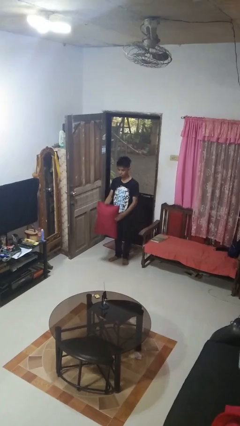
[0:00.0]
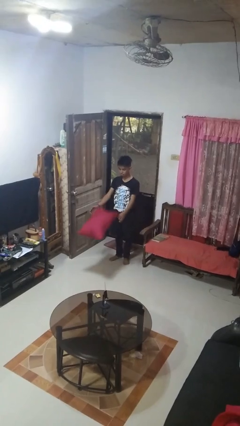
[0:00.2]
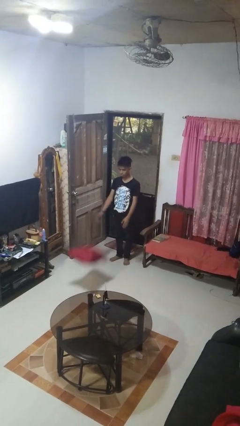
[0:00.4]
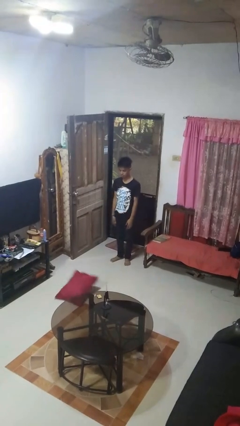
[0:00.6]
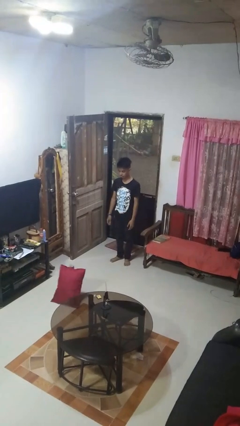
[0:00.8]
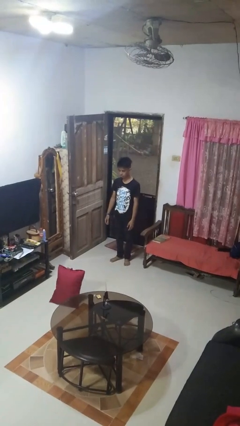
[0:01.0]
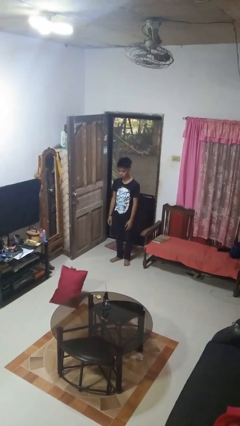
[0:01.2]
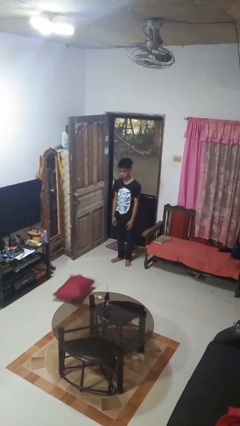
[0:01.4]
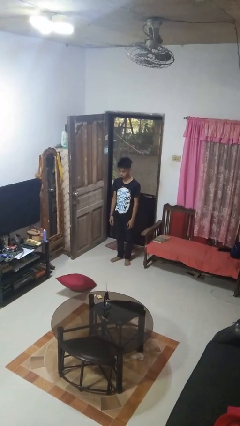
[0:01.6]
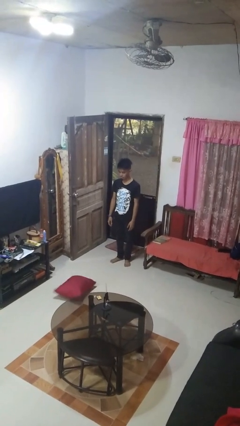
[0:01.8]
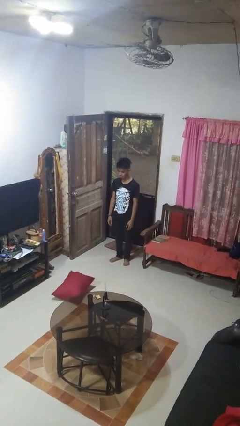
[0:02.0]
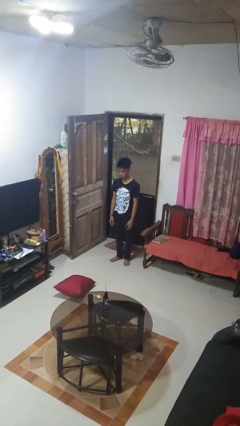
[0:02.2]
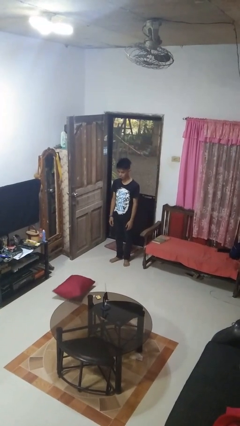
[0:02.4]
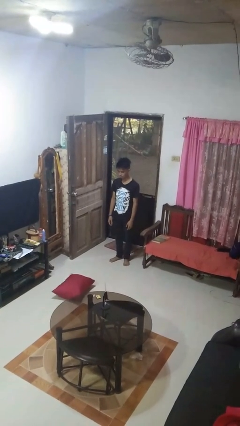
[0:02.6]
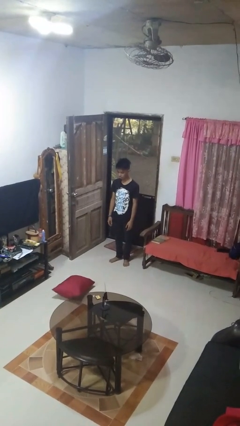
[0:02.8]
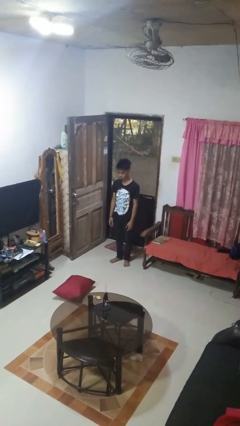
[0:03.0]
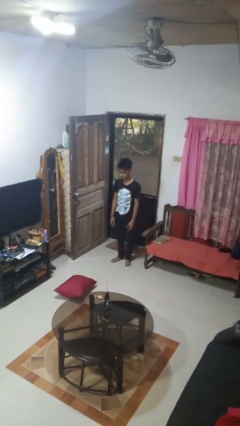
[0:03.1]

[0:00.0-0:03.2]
person throws object to ground

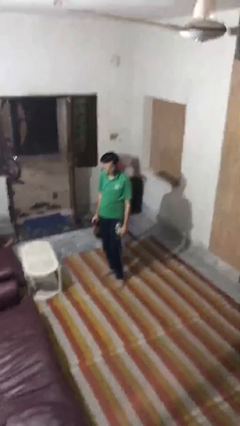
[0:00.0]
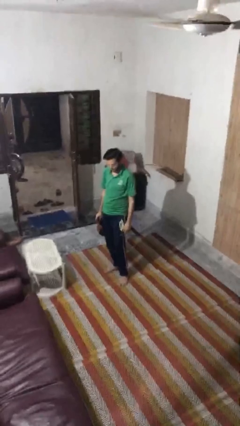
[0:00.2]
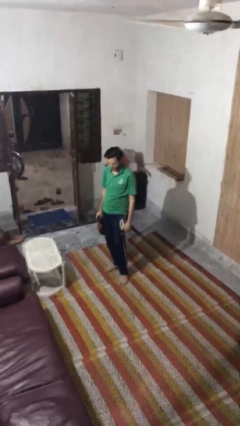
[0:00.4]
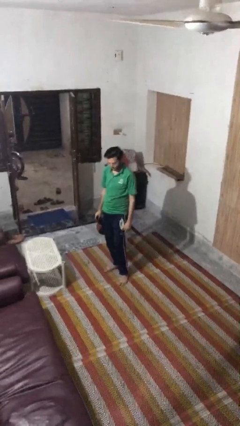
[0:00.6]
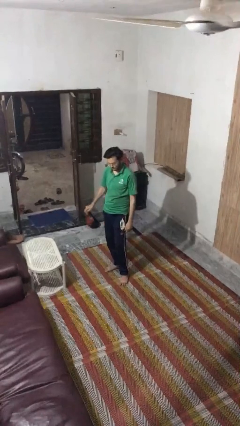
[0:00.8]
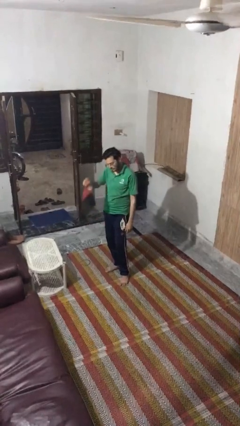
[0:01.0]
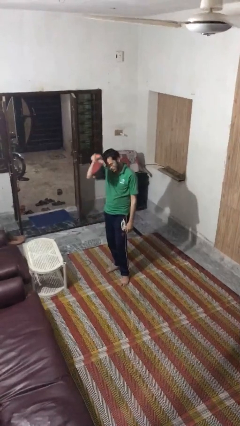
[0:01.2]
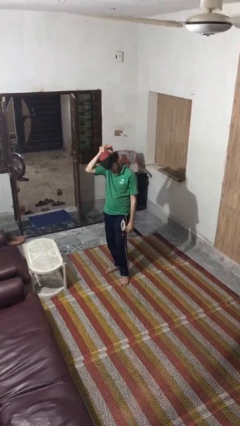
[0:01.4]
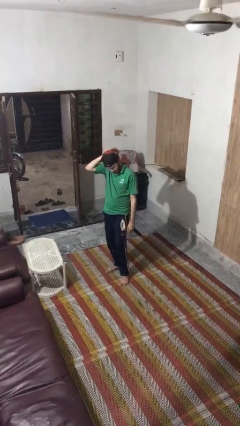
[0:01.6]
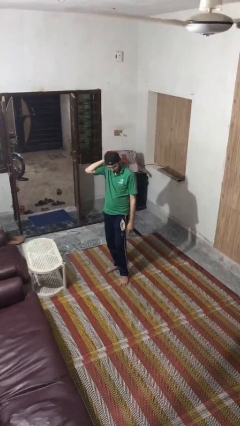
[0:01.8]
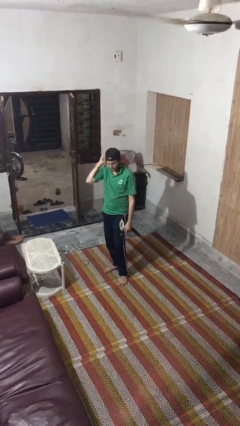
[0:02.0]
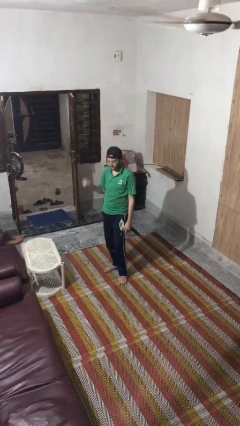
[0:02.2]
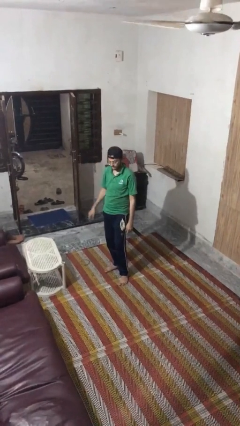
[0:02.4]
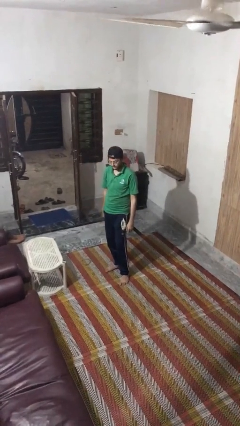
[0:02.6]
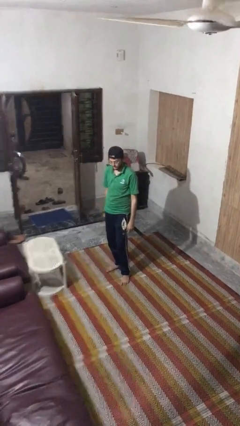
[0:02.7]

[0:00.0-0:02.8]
person puts on hat

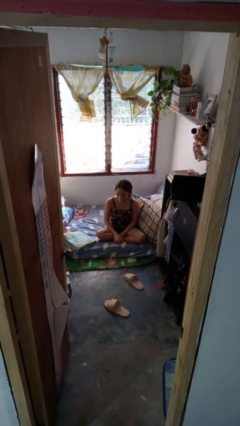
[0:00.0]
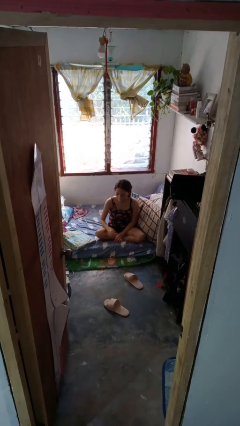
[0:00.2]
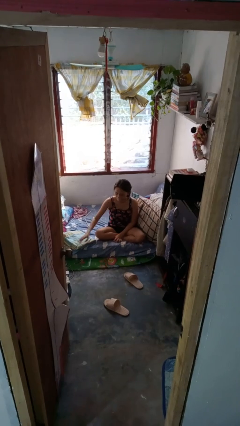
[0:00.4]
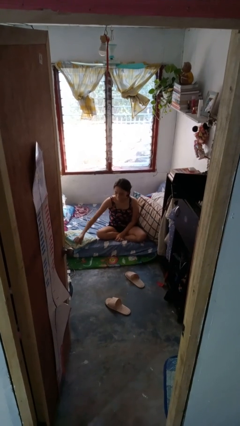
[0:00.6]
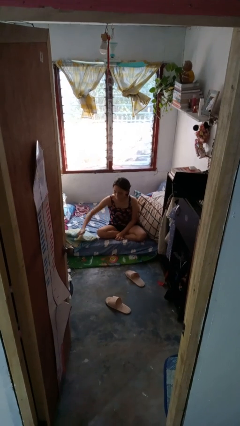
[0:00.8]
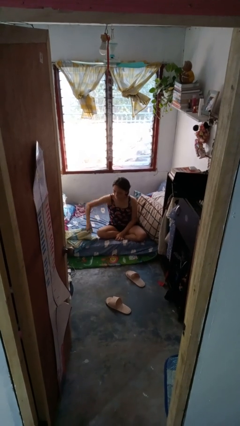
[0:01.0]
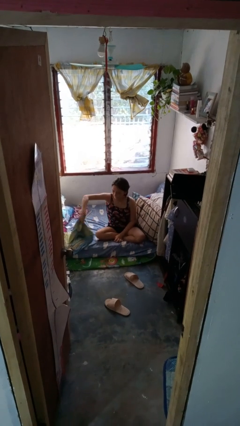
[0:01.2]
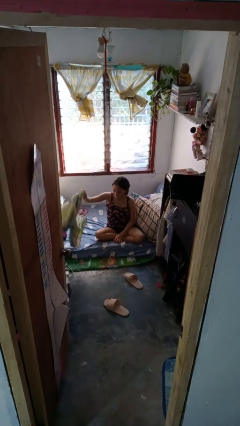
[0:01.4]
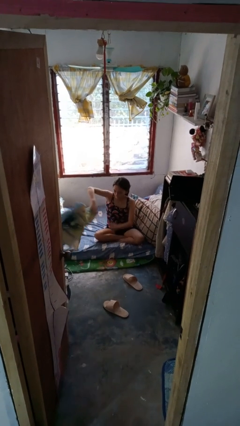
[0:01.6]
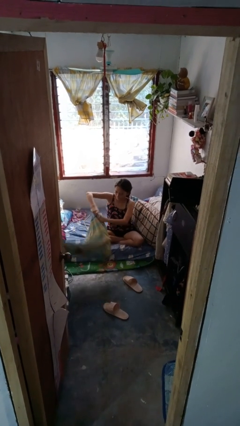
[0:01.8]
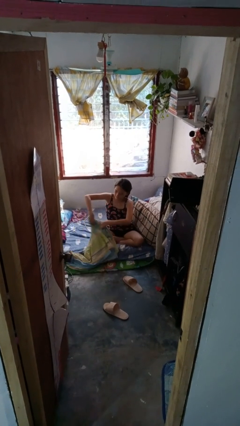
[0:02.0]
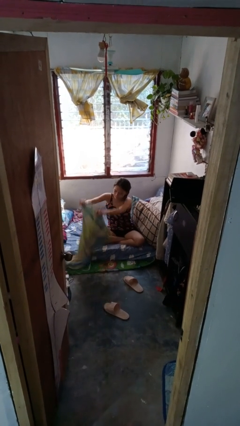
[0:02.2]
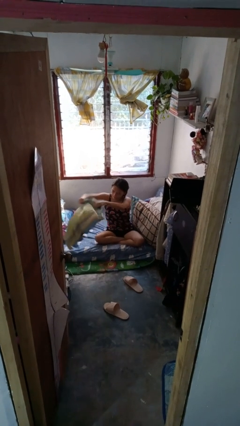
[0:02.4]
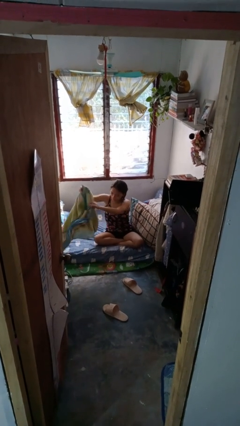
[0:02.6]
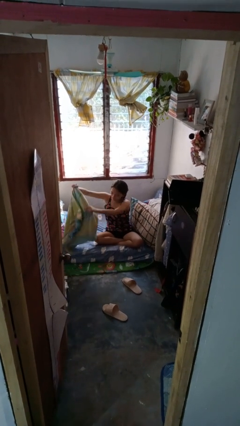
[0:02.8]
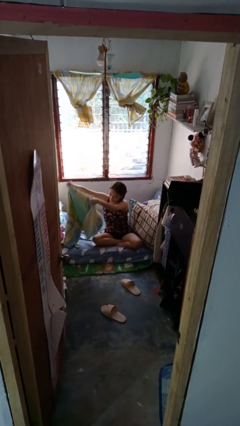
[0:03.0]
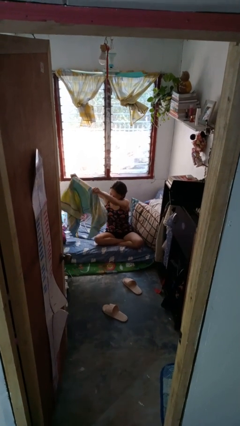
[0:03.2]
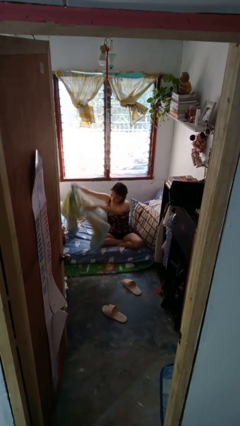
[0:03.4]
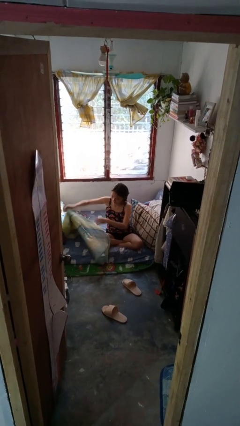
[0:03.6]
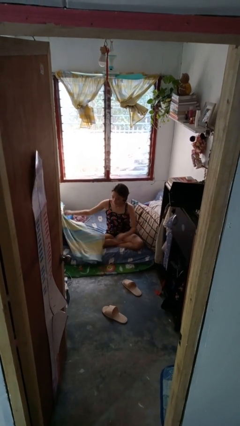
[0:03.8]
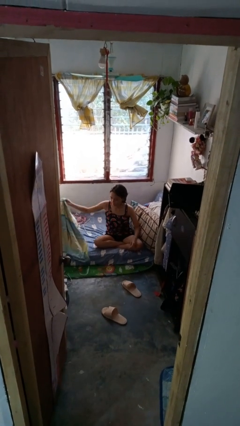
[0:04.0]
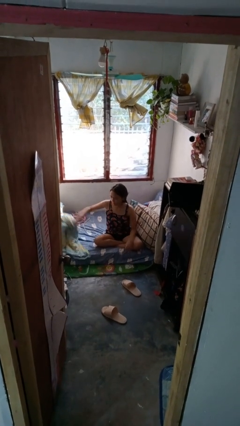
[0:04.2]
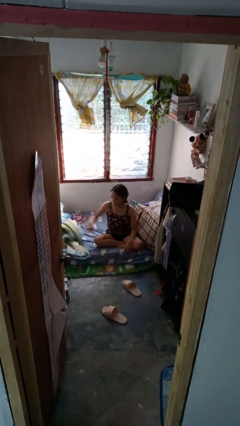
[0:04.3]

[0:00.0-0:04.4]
person unfolds blanket

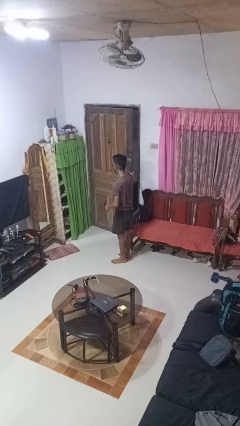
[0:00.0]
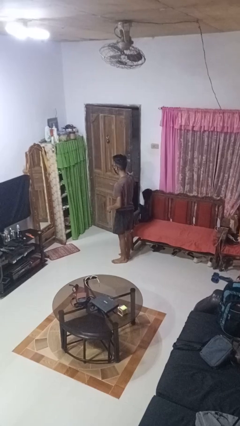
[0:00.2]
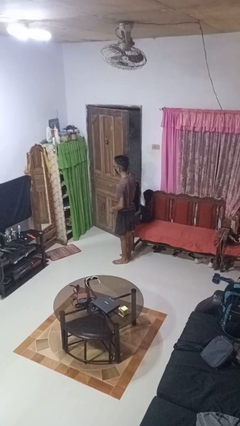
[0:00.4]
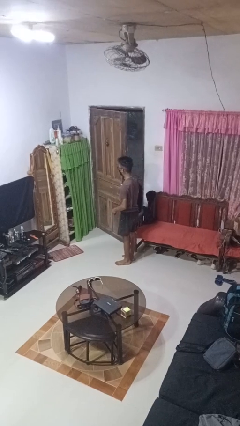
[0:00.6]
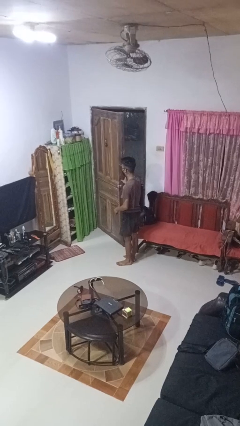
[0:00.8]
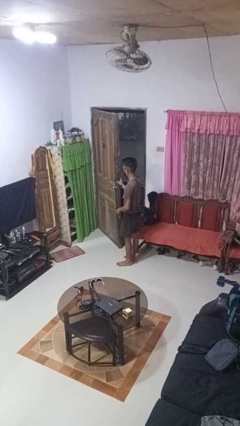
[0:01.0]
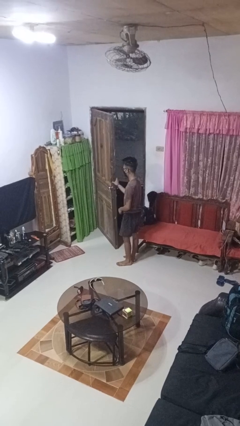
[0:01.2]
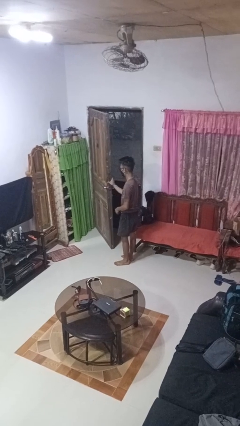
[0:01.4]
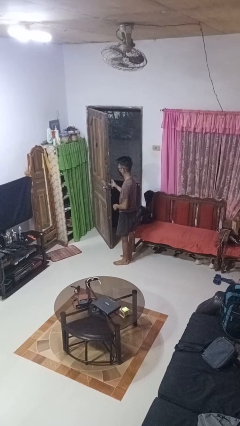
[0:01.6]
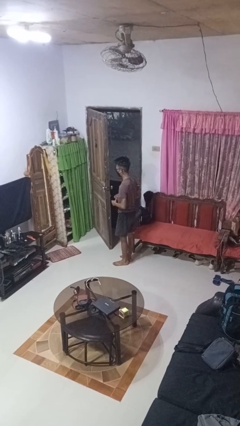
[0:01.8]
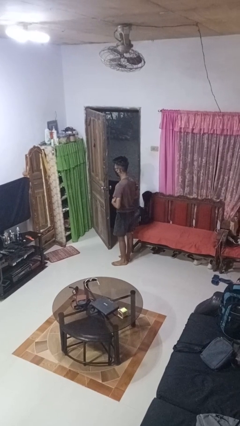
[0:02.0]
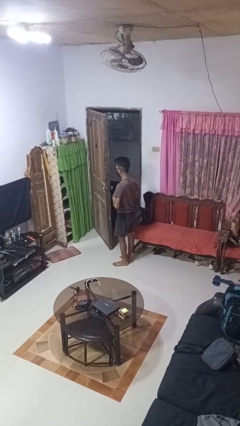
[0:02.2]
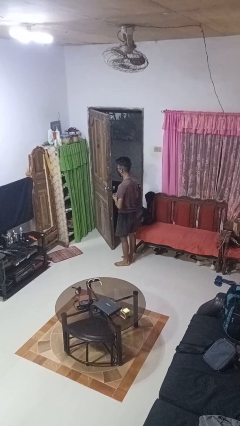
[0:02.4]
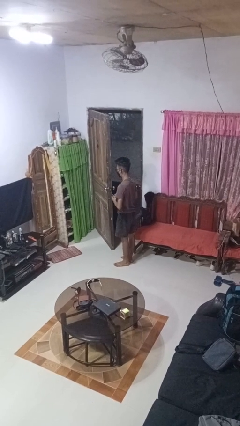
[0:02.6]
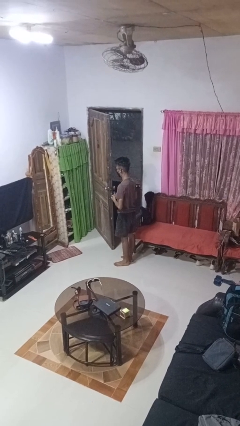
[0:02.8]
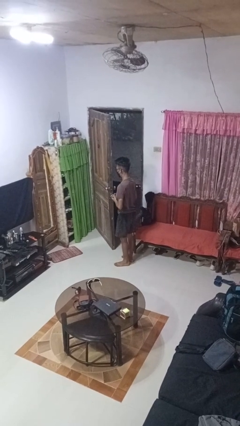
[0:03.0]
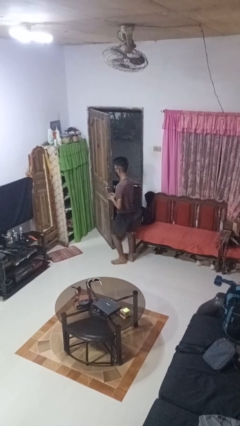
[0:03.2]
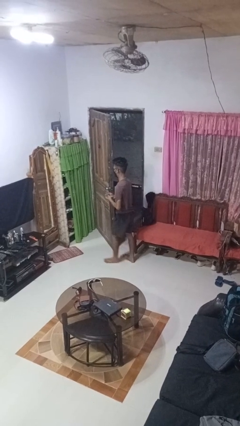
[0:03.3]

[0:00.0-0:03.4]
person opens facility door

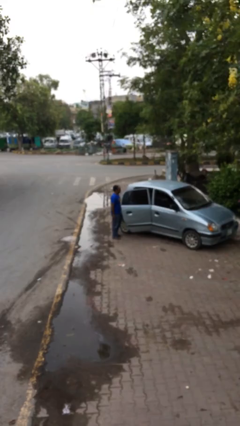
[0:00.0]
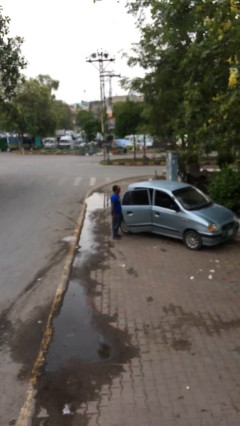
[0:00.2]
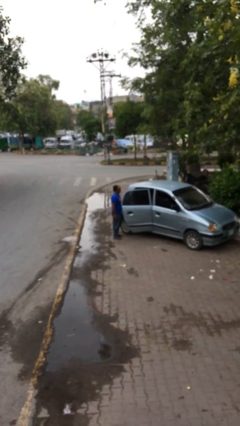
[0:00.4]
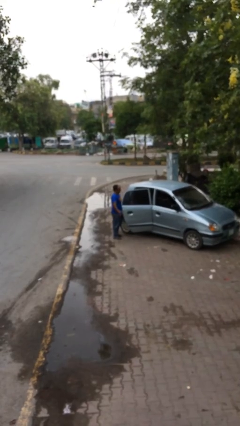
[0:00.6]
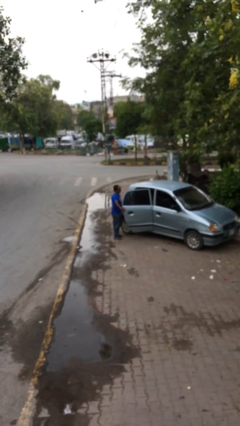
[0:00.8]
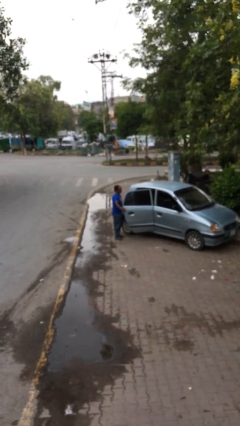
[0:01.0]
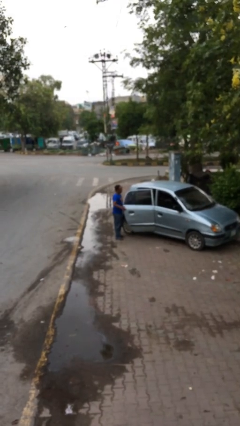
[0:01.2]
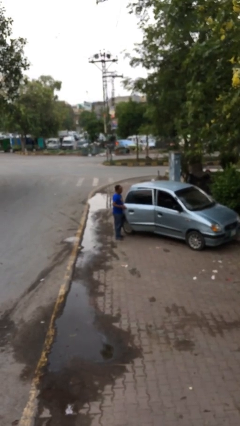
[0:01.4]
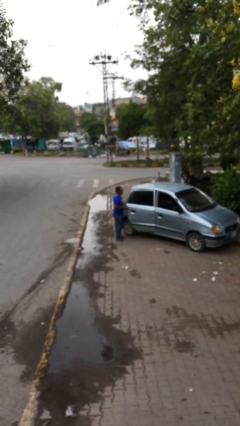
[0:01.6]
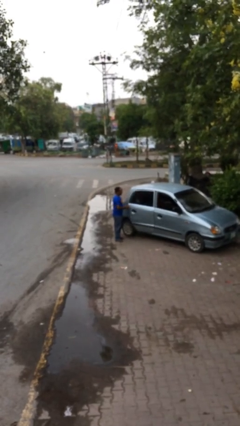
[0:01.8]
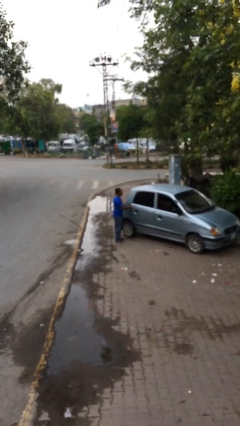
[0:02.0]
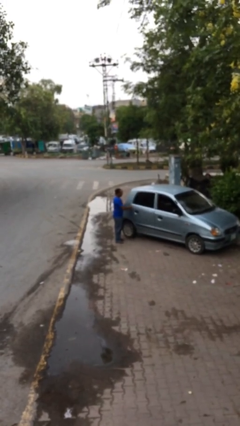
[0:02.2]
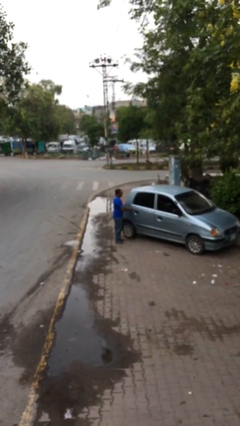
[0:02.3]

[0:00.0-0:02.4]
person closes car door

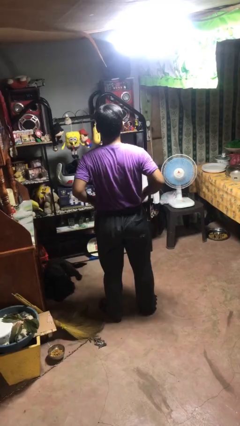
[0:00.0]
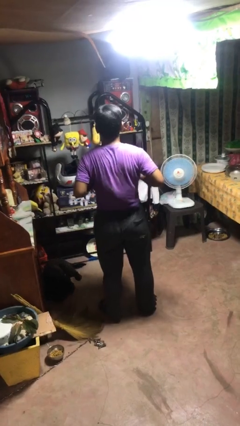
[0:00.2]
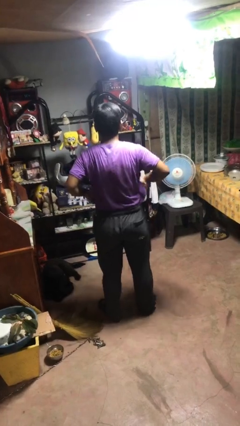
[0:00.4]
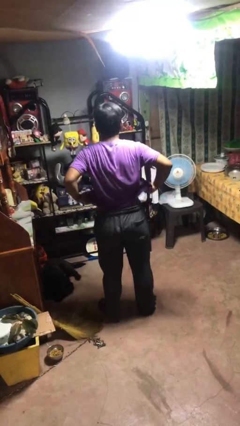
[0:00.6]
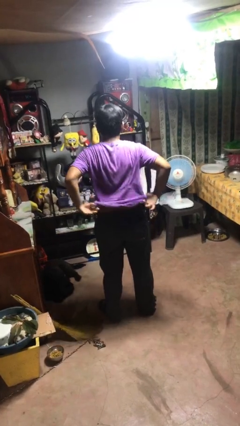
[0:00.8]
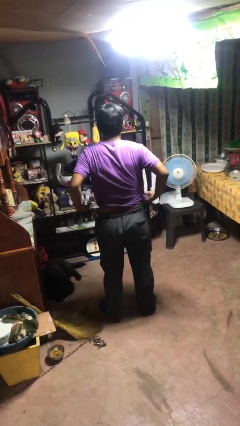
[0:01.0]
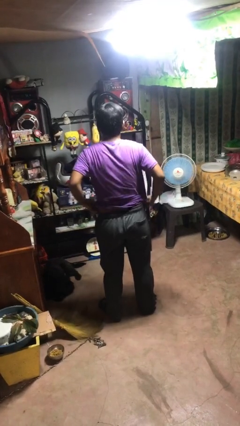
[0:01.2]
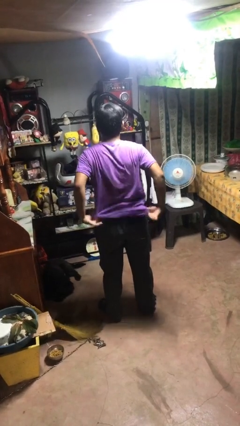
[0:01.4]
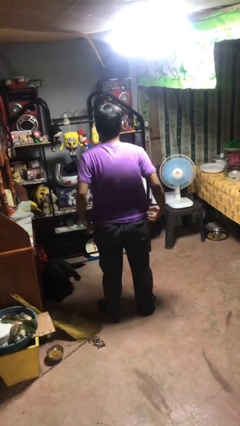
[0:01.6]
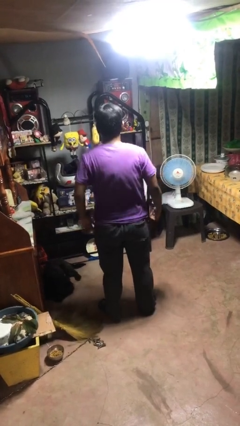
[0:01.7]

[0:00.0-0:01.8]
person untucks shirt
